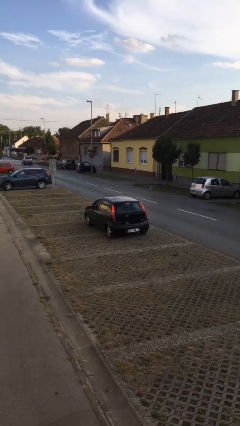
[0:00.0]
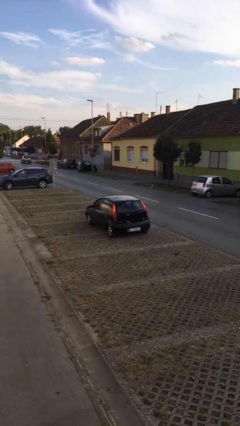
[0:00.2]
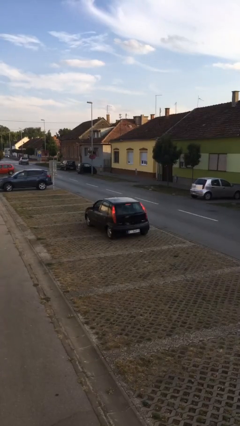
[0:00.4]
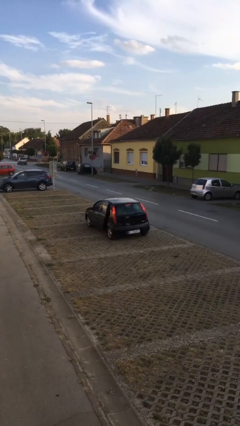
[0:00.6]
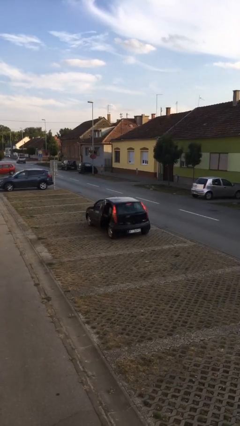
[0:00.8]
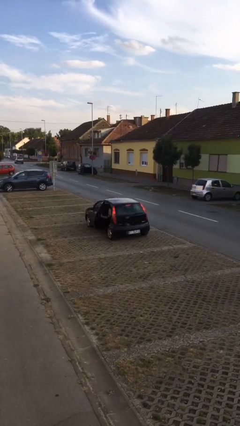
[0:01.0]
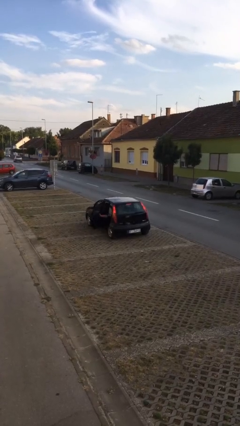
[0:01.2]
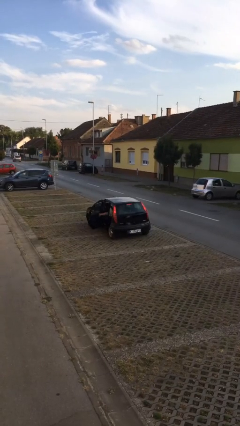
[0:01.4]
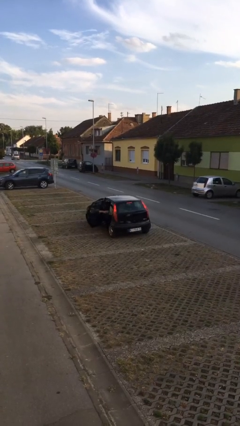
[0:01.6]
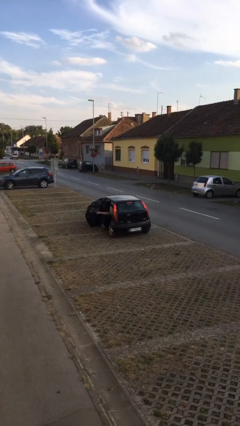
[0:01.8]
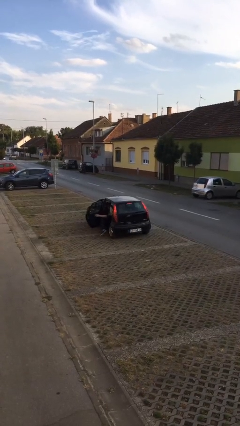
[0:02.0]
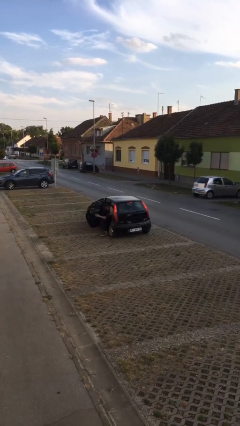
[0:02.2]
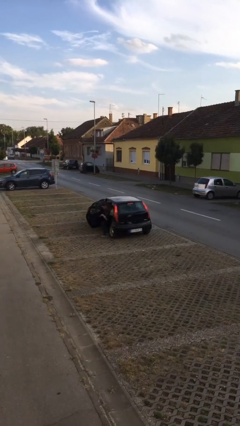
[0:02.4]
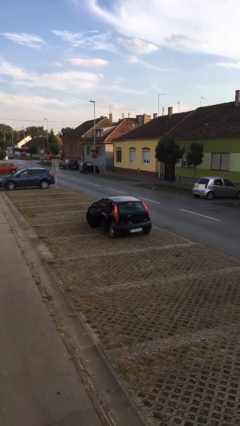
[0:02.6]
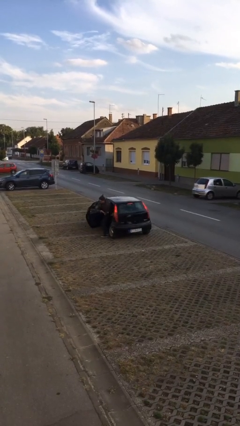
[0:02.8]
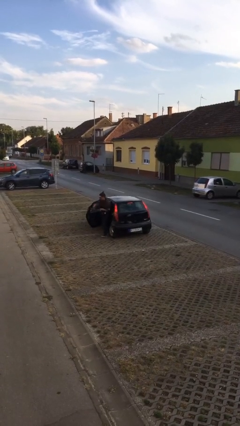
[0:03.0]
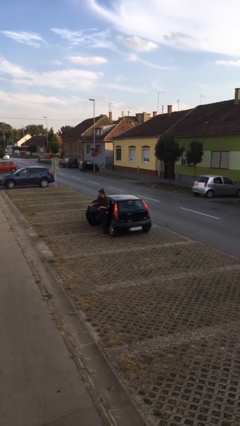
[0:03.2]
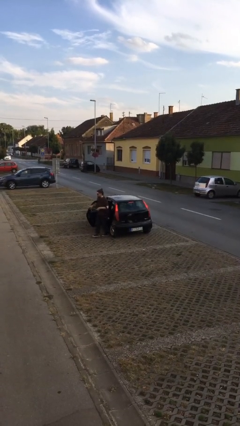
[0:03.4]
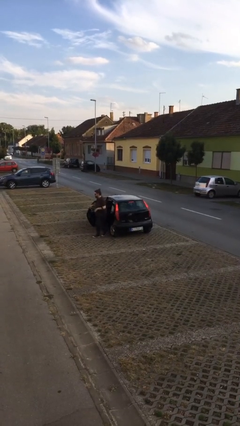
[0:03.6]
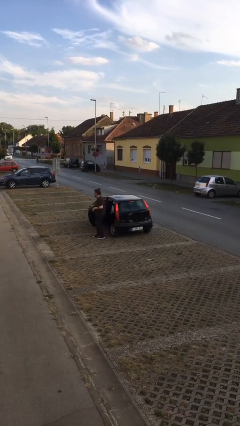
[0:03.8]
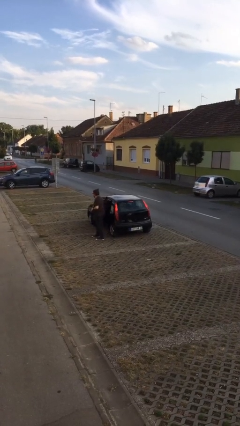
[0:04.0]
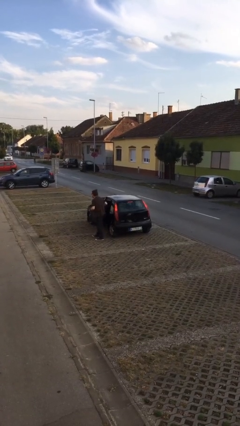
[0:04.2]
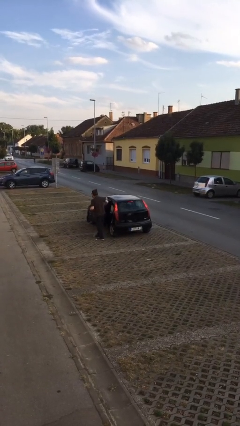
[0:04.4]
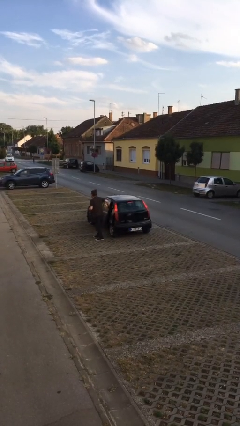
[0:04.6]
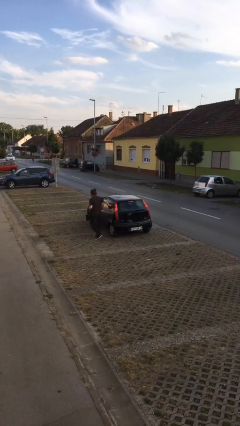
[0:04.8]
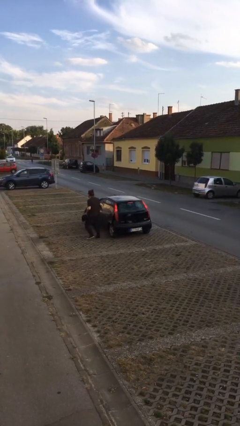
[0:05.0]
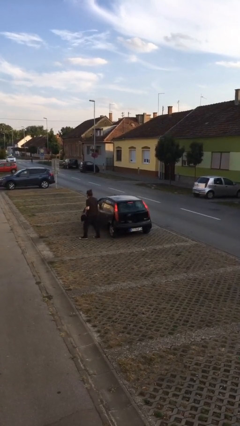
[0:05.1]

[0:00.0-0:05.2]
car drops off person

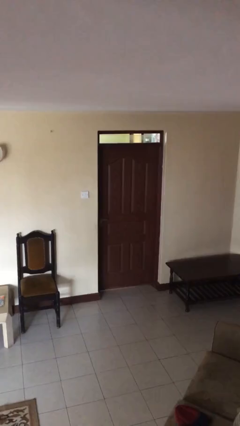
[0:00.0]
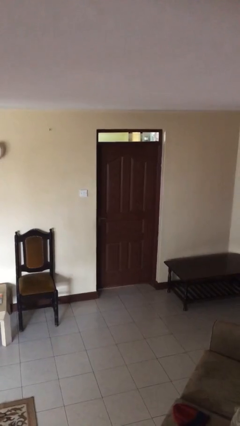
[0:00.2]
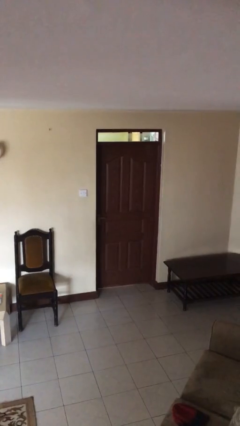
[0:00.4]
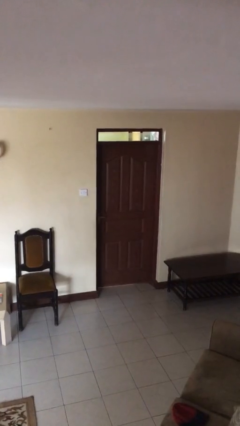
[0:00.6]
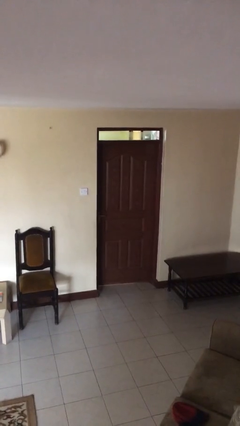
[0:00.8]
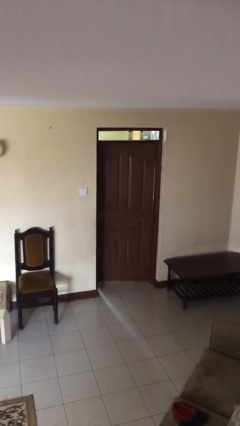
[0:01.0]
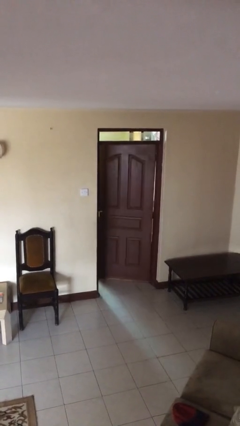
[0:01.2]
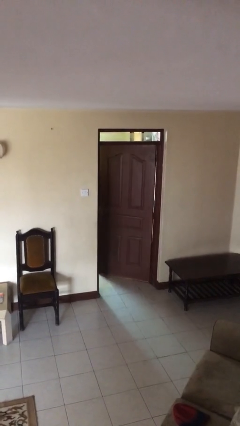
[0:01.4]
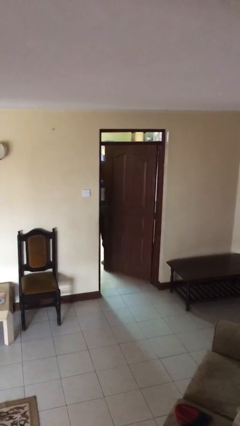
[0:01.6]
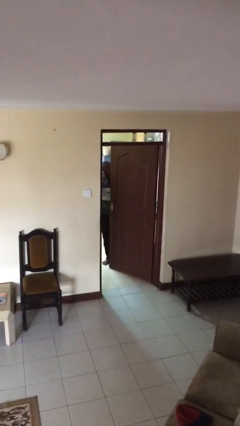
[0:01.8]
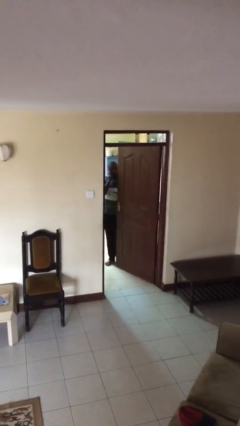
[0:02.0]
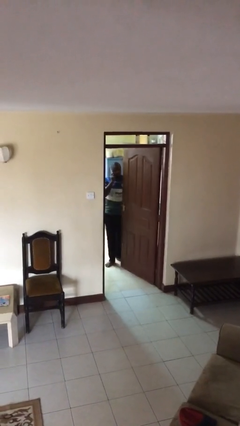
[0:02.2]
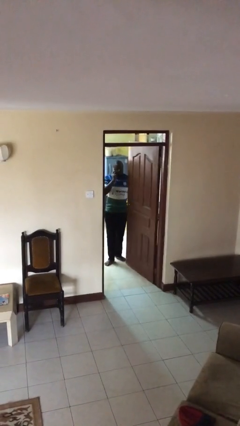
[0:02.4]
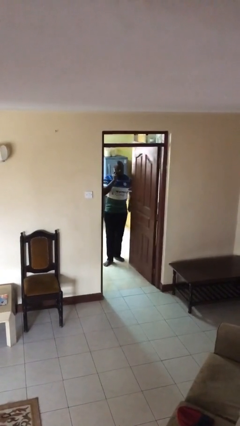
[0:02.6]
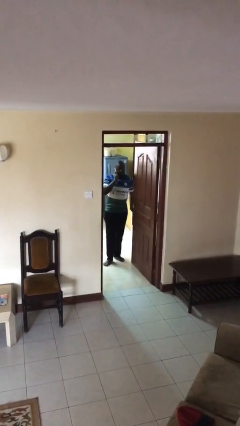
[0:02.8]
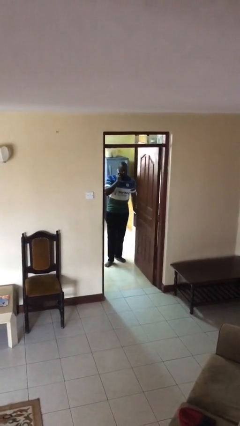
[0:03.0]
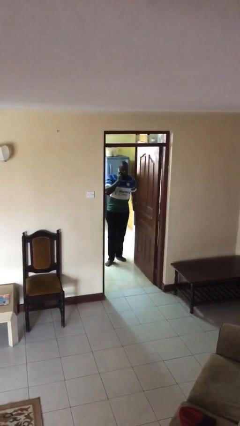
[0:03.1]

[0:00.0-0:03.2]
person opens facility door

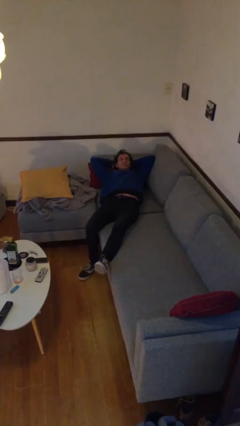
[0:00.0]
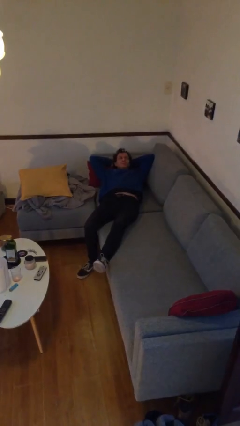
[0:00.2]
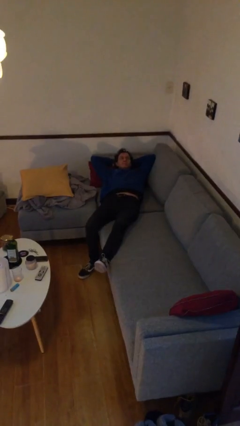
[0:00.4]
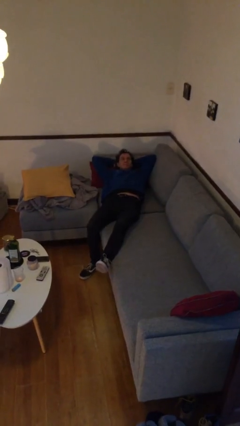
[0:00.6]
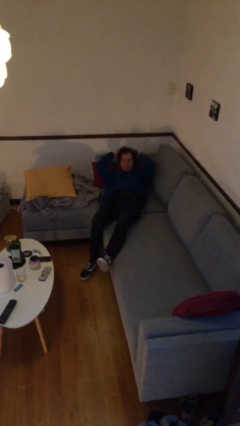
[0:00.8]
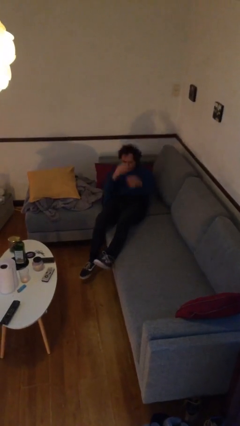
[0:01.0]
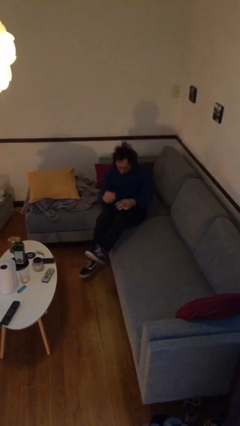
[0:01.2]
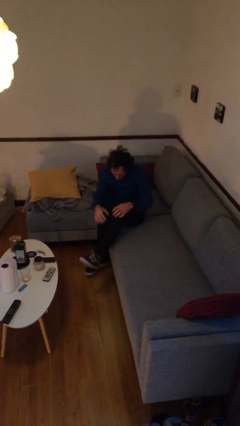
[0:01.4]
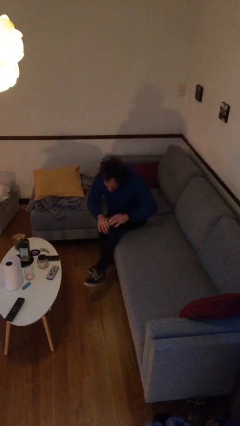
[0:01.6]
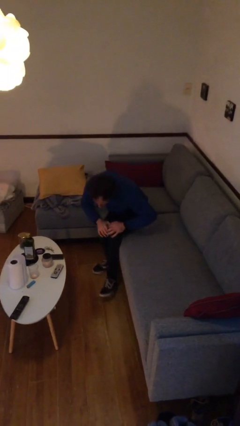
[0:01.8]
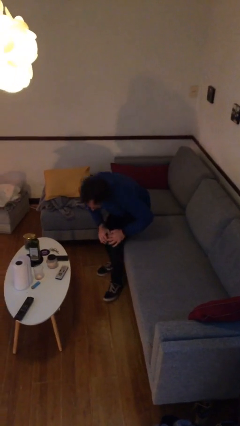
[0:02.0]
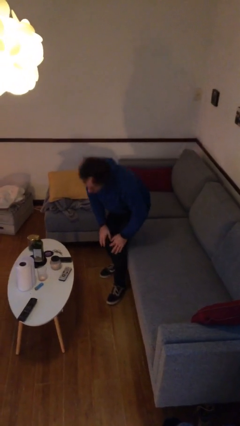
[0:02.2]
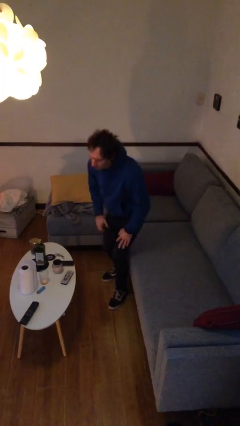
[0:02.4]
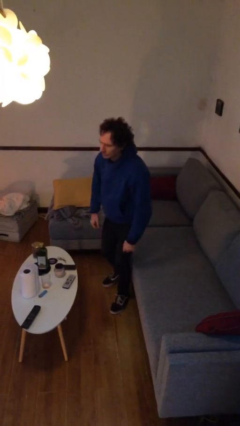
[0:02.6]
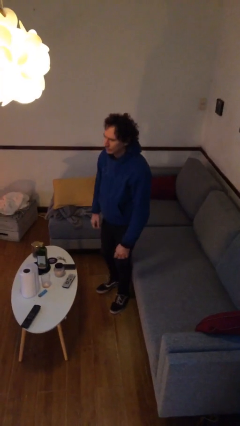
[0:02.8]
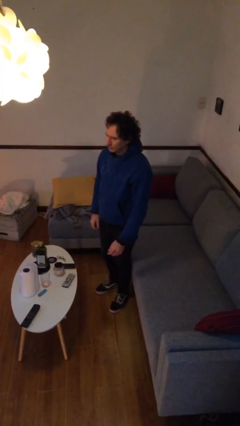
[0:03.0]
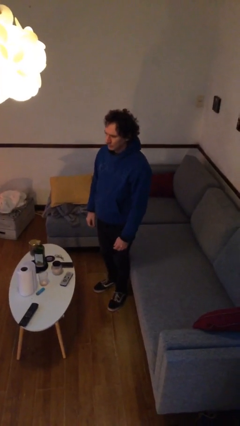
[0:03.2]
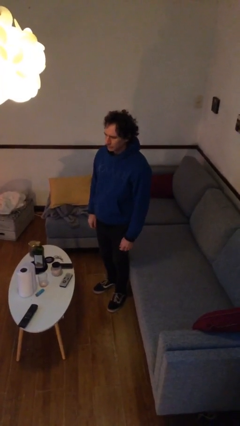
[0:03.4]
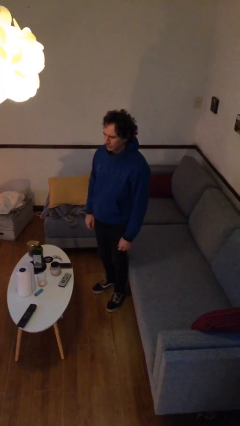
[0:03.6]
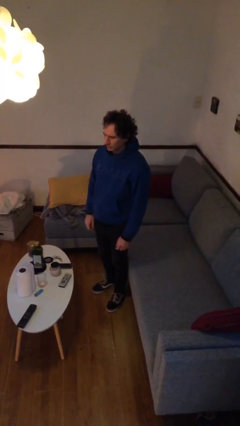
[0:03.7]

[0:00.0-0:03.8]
person stands up

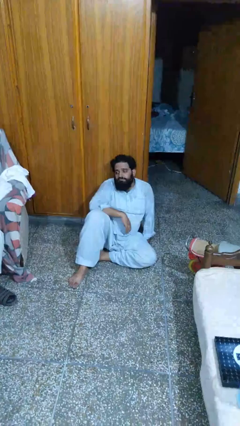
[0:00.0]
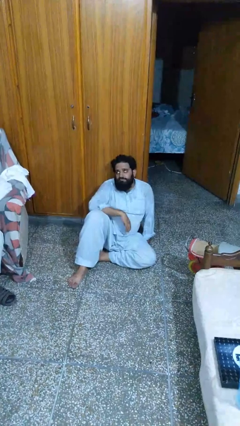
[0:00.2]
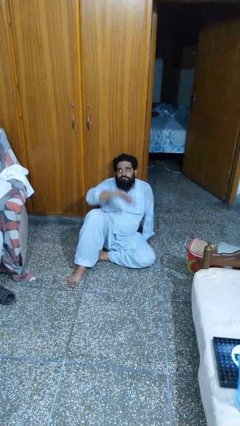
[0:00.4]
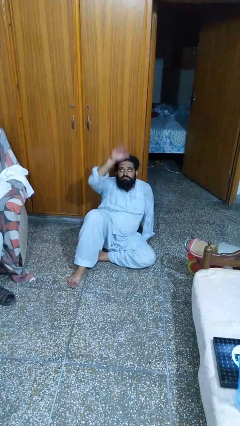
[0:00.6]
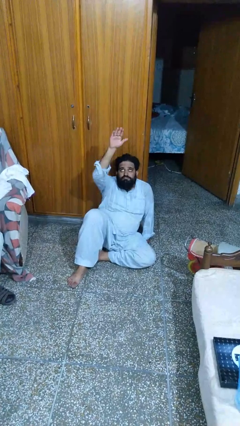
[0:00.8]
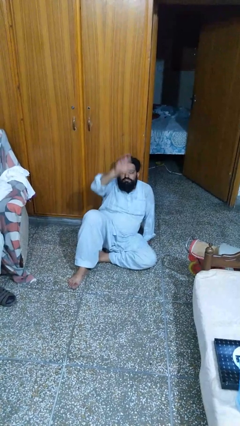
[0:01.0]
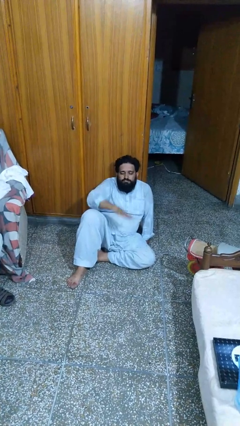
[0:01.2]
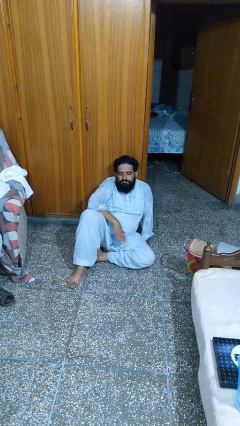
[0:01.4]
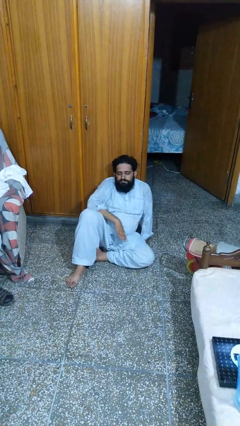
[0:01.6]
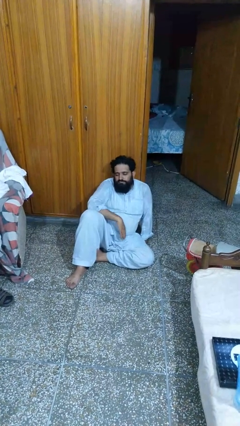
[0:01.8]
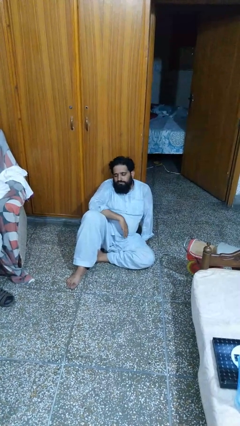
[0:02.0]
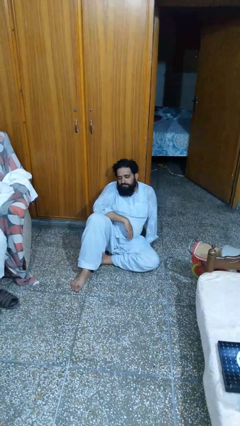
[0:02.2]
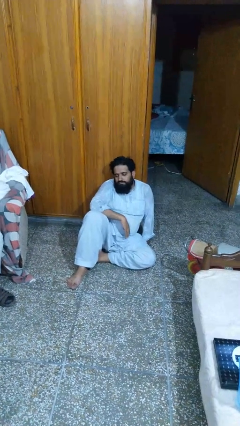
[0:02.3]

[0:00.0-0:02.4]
person gestures swipe down

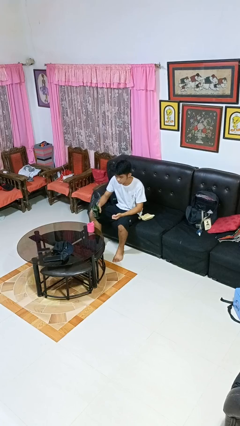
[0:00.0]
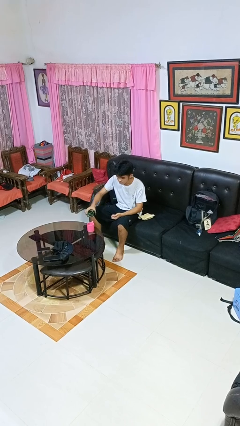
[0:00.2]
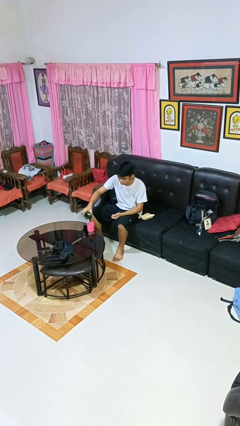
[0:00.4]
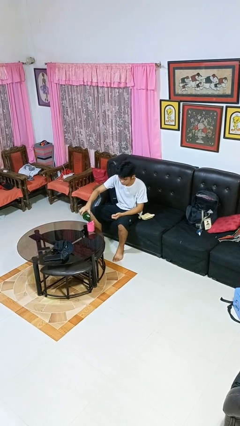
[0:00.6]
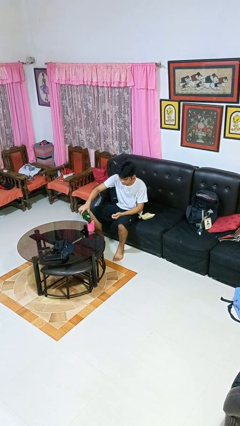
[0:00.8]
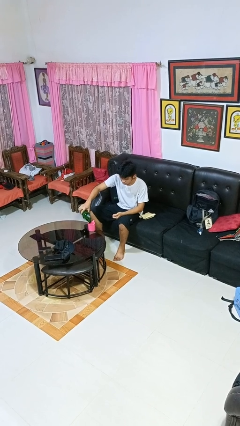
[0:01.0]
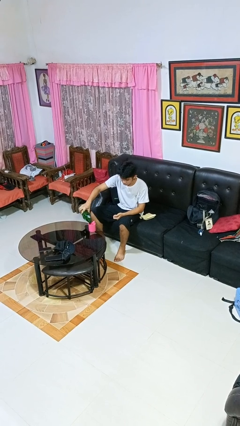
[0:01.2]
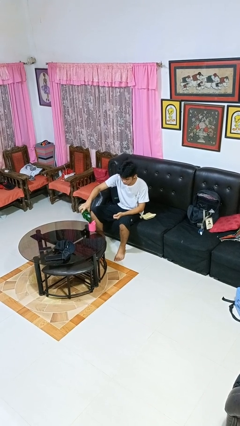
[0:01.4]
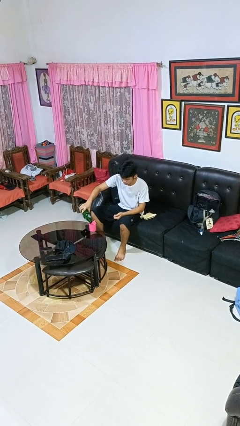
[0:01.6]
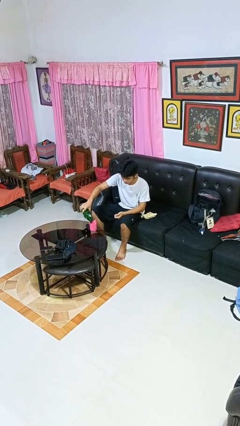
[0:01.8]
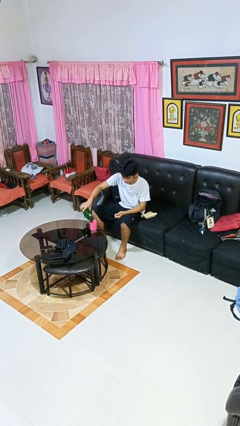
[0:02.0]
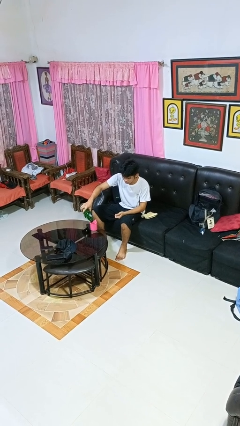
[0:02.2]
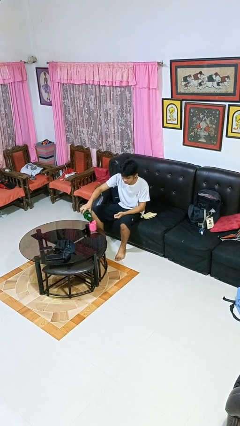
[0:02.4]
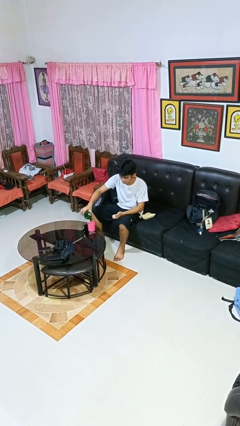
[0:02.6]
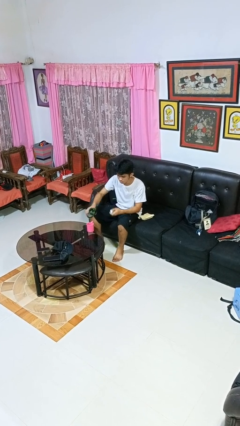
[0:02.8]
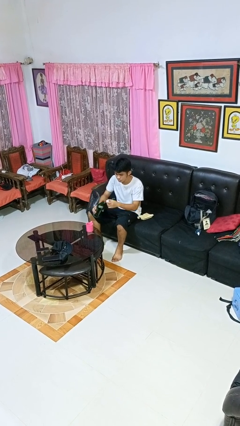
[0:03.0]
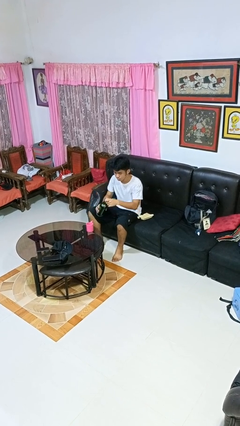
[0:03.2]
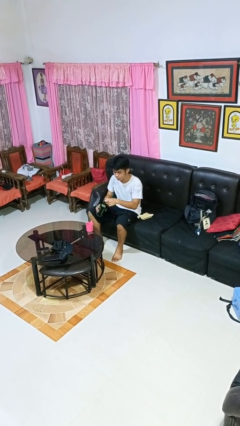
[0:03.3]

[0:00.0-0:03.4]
person pours liquid into cup
